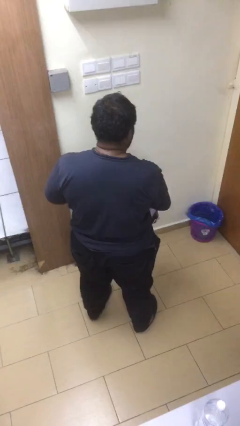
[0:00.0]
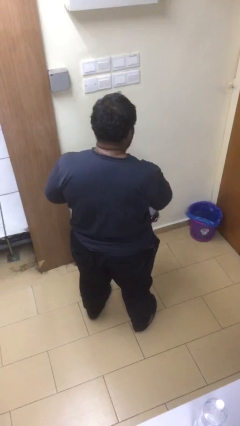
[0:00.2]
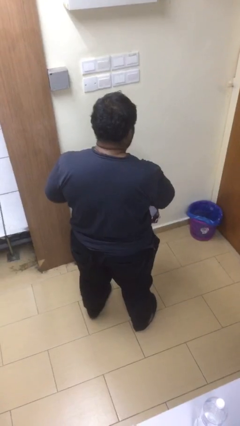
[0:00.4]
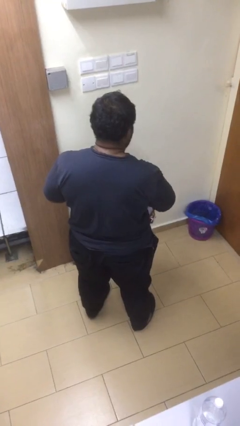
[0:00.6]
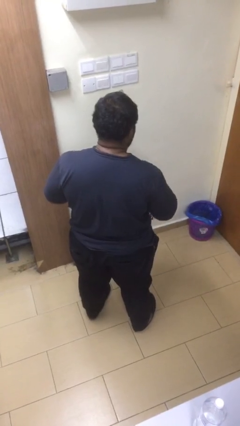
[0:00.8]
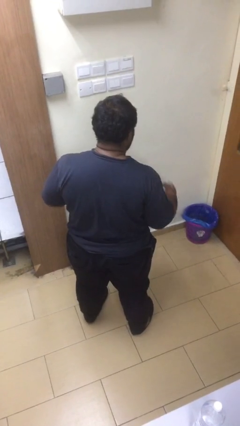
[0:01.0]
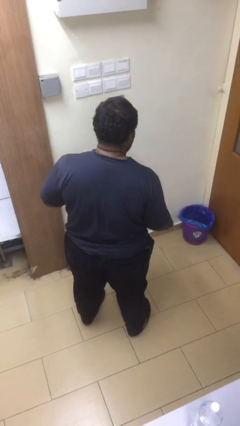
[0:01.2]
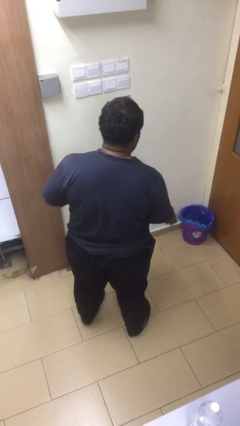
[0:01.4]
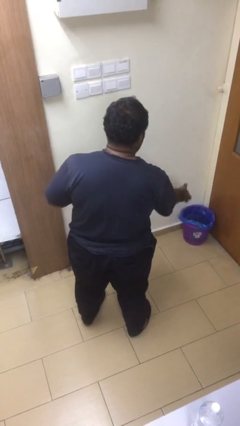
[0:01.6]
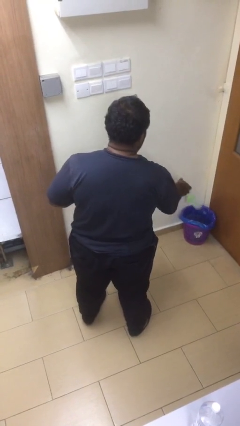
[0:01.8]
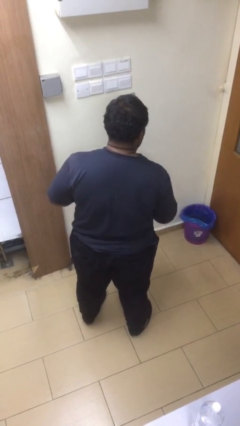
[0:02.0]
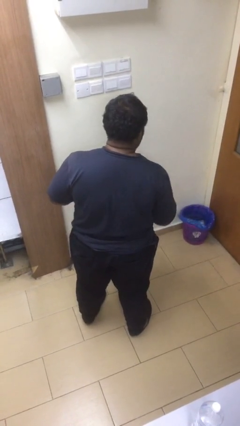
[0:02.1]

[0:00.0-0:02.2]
person discards trash

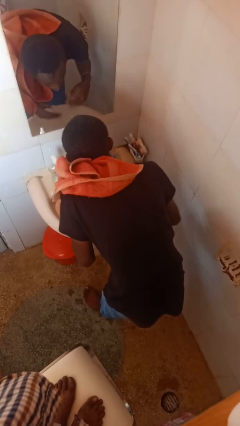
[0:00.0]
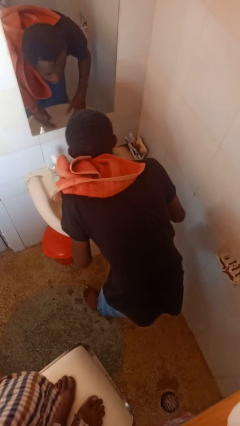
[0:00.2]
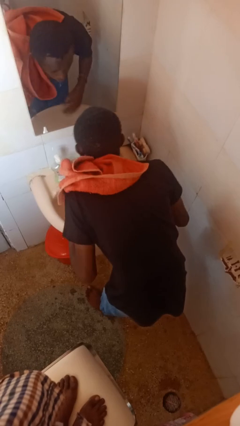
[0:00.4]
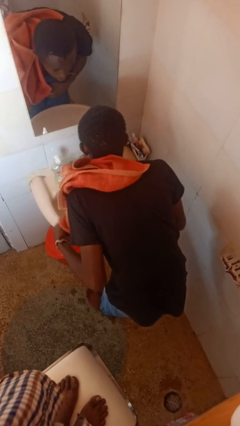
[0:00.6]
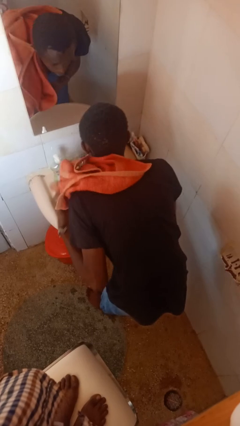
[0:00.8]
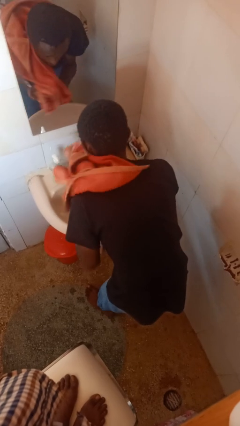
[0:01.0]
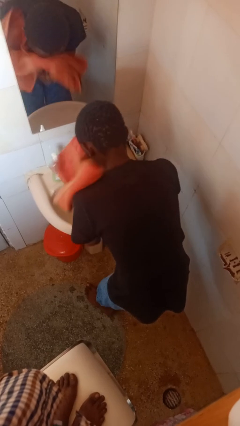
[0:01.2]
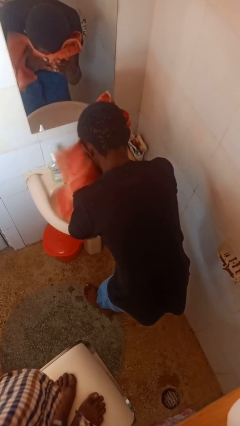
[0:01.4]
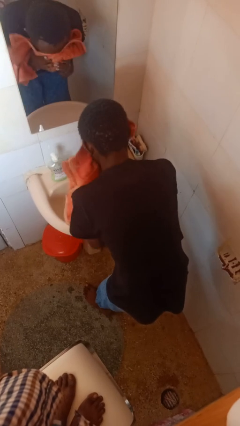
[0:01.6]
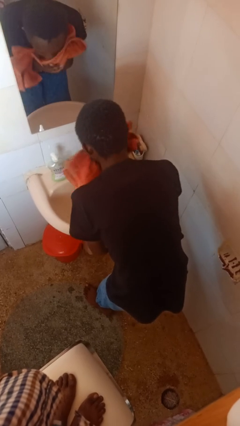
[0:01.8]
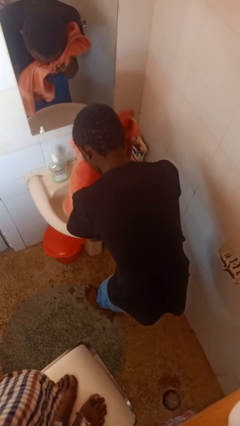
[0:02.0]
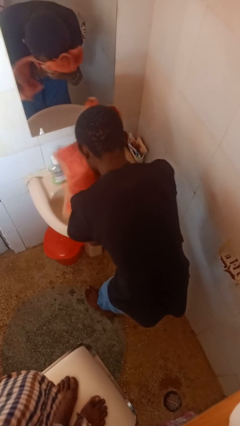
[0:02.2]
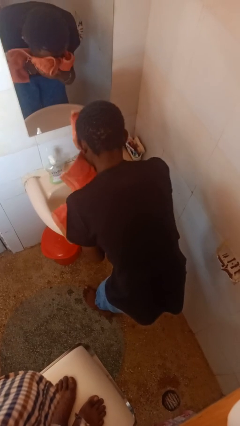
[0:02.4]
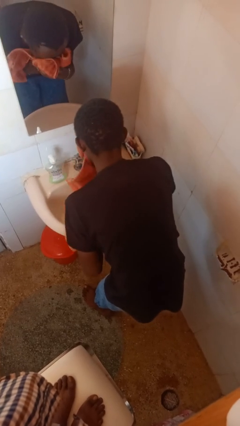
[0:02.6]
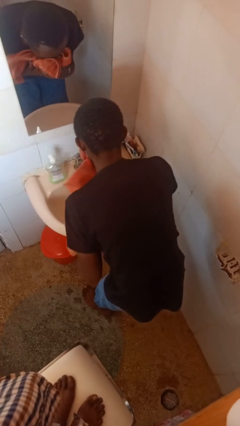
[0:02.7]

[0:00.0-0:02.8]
person dries face with towel

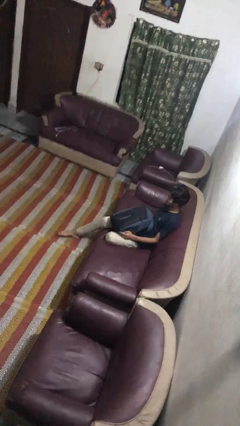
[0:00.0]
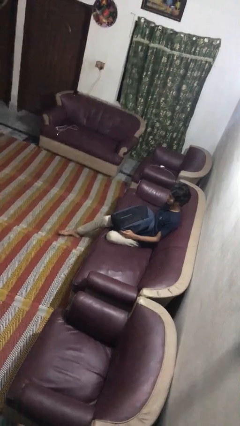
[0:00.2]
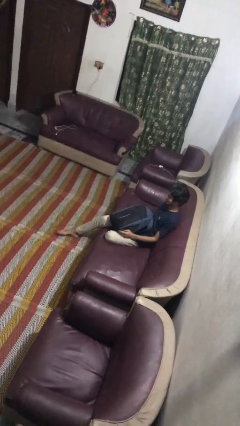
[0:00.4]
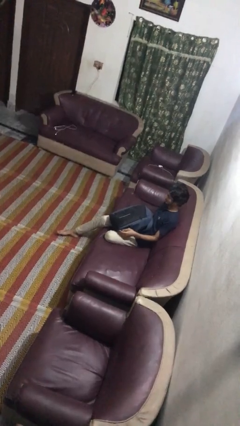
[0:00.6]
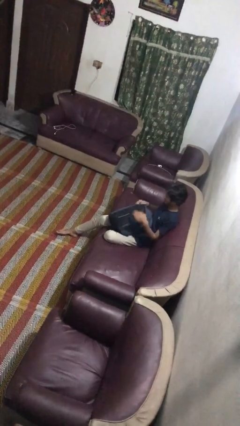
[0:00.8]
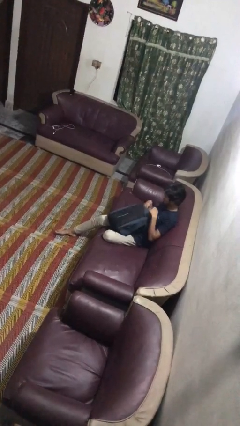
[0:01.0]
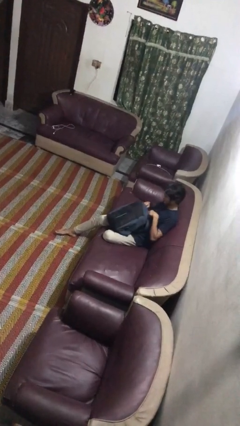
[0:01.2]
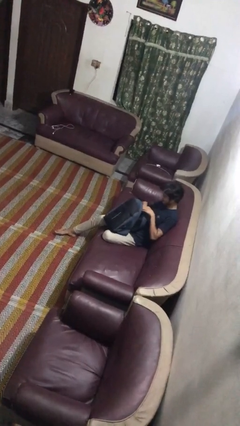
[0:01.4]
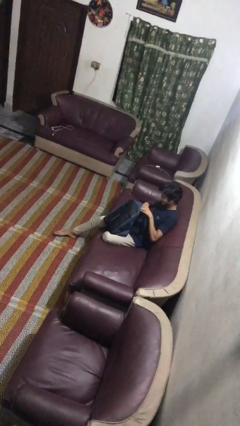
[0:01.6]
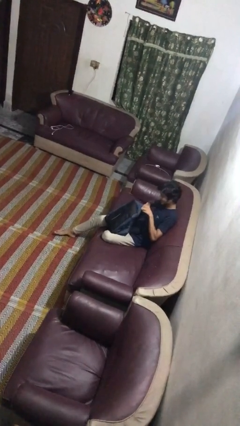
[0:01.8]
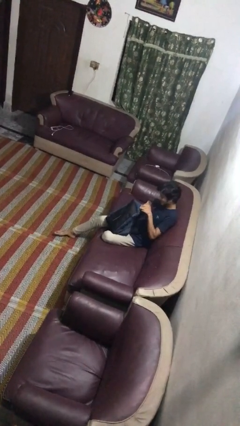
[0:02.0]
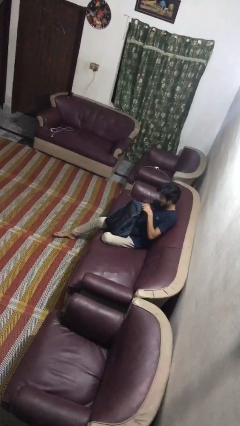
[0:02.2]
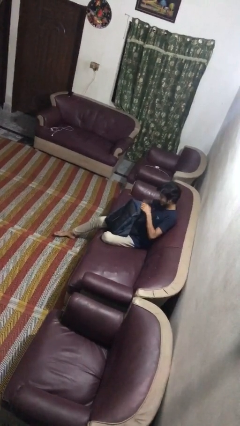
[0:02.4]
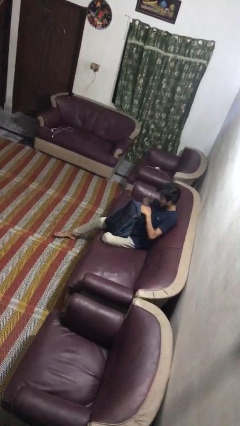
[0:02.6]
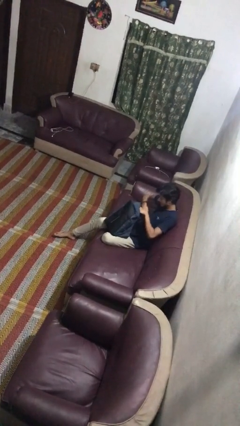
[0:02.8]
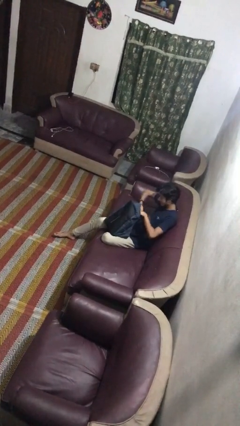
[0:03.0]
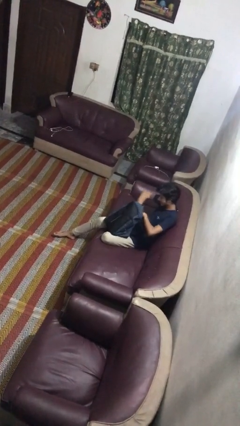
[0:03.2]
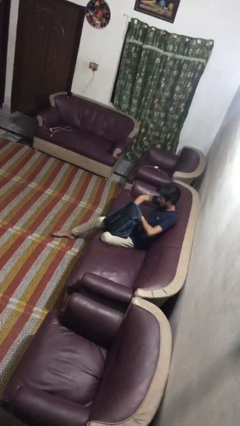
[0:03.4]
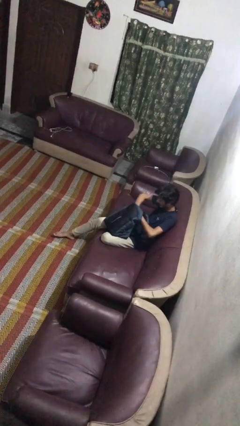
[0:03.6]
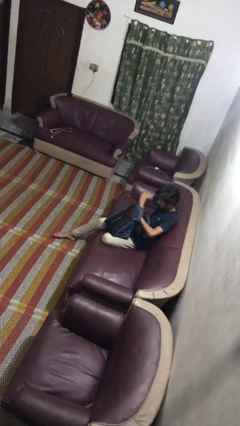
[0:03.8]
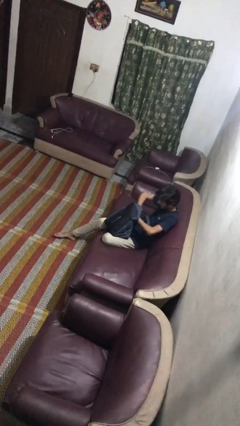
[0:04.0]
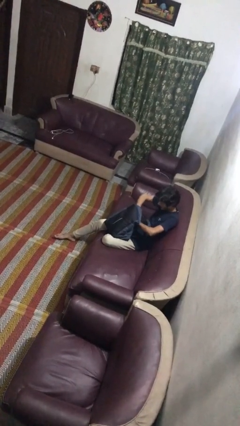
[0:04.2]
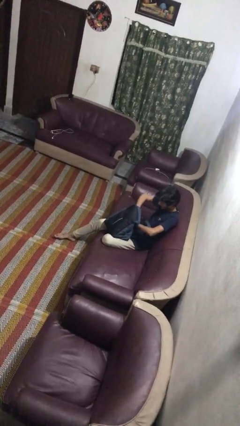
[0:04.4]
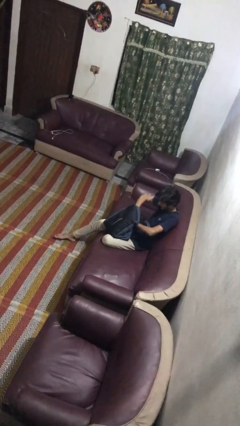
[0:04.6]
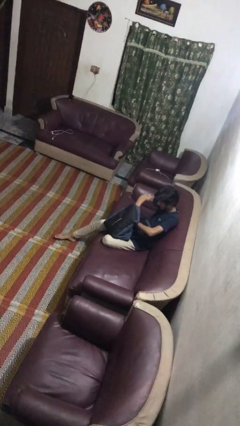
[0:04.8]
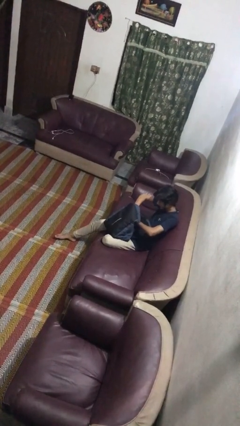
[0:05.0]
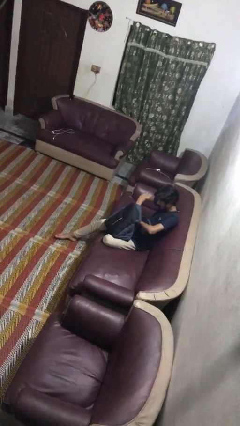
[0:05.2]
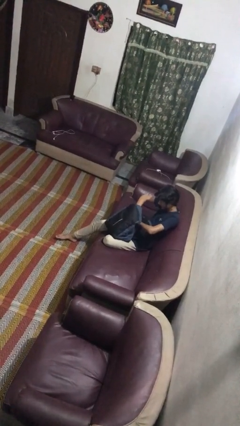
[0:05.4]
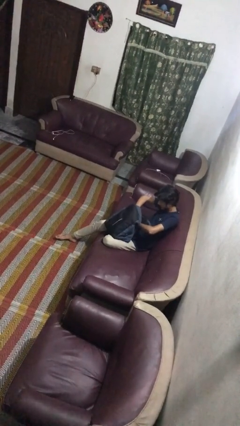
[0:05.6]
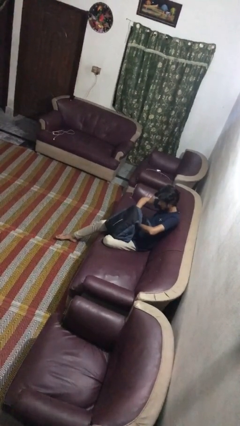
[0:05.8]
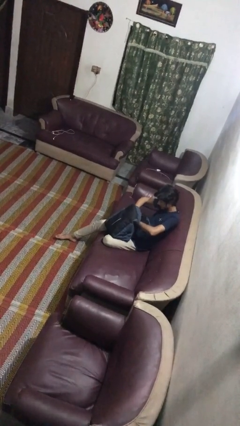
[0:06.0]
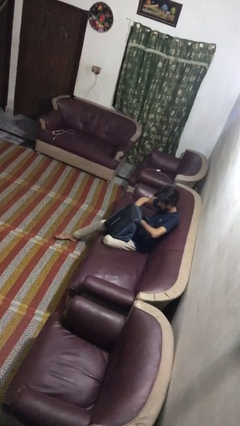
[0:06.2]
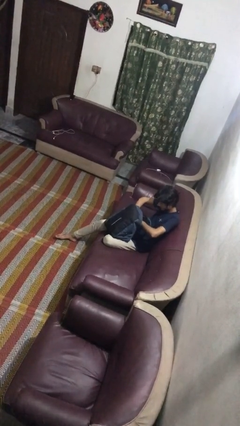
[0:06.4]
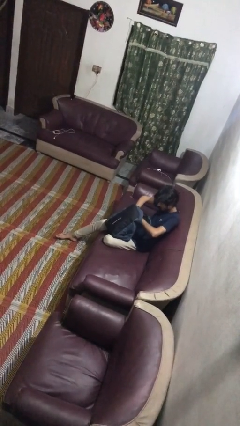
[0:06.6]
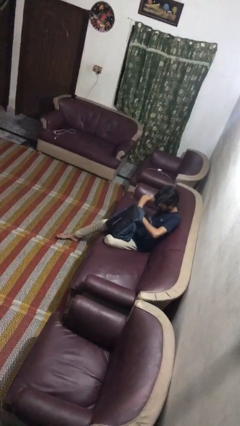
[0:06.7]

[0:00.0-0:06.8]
person searches in backpack

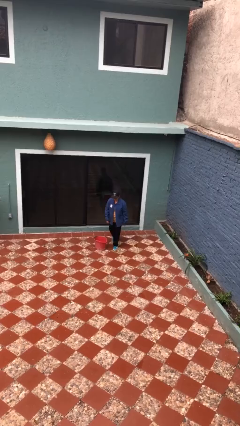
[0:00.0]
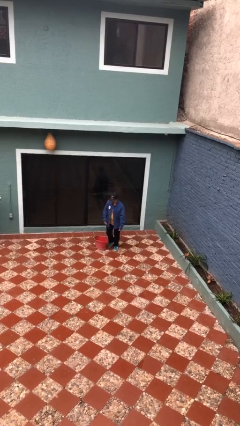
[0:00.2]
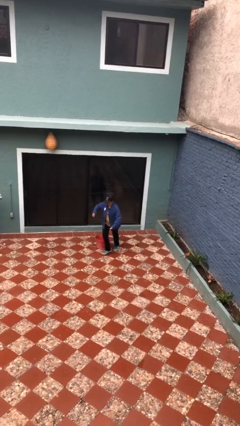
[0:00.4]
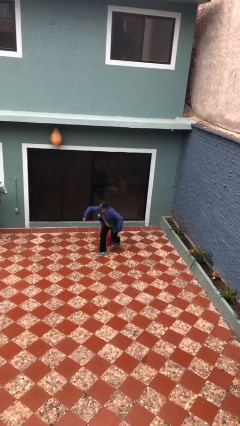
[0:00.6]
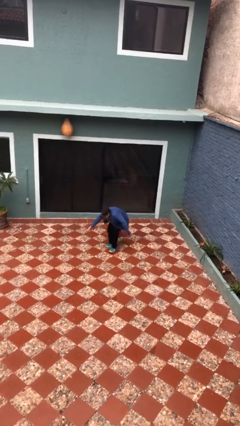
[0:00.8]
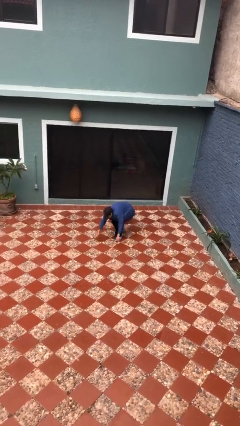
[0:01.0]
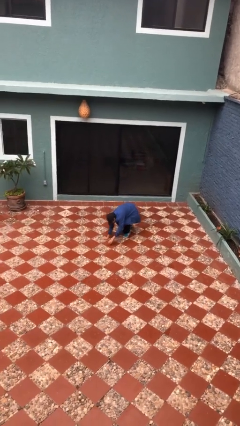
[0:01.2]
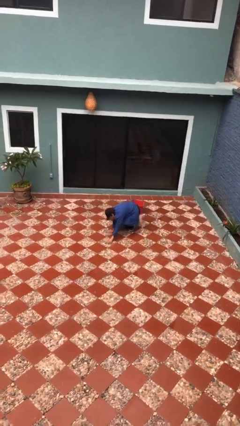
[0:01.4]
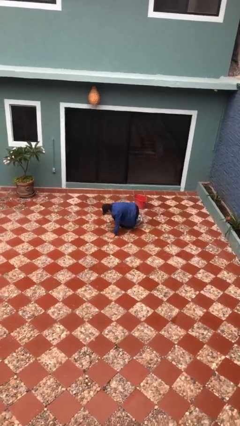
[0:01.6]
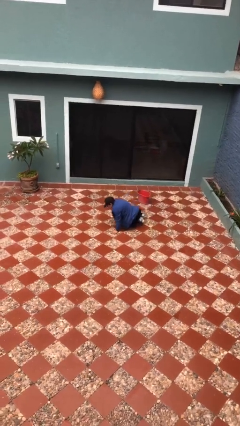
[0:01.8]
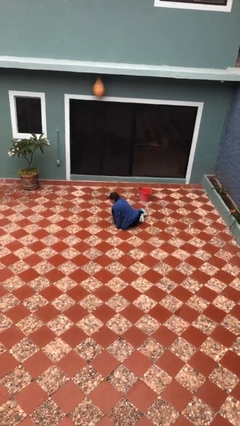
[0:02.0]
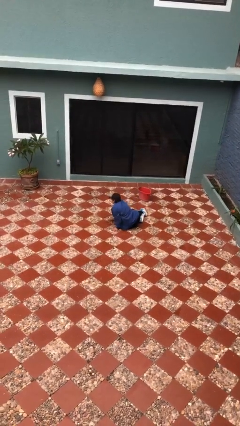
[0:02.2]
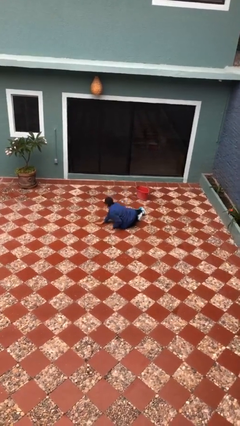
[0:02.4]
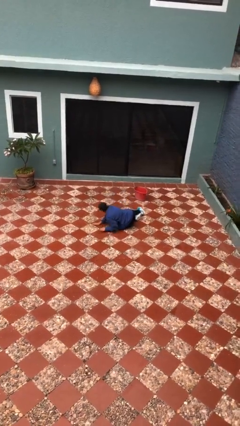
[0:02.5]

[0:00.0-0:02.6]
person trips on object on floor

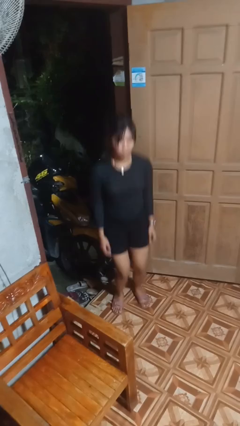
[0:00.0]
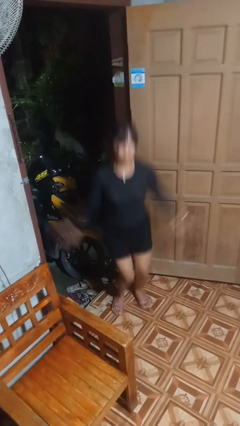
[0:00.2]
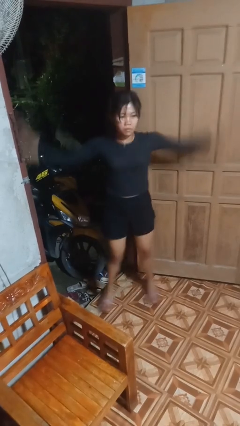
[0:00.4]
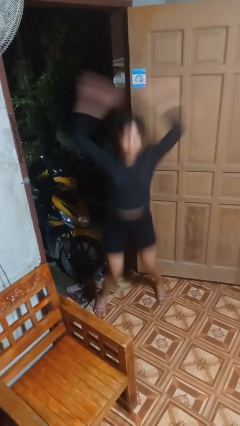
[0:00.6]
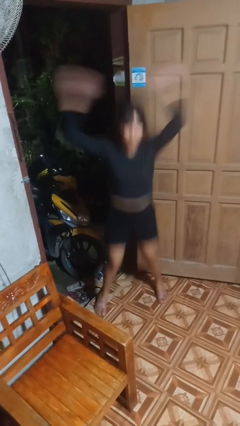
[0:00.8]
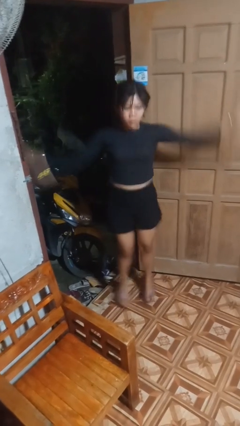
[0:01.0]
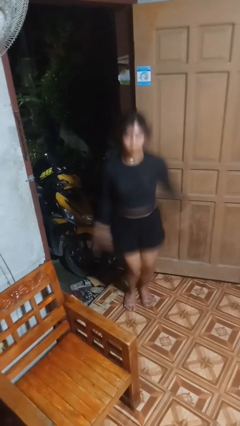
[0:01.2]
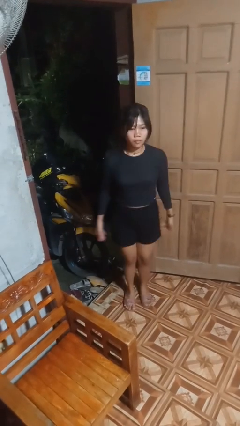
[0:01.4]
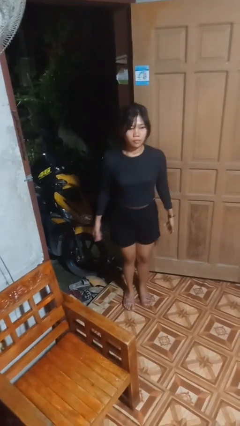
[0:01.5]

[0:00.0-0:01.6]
person exercises with jumping jacks

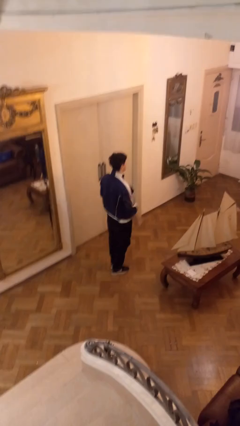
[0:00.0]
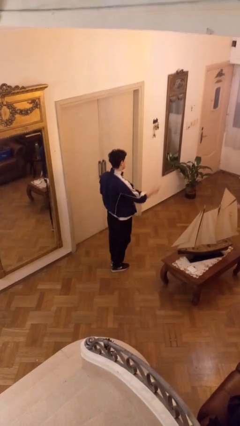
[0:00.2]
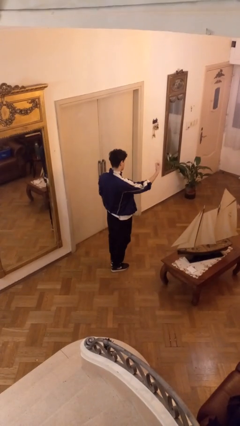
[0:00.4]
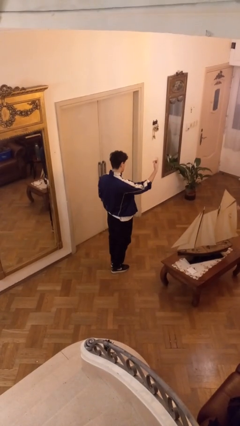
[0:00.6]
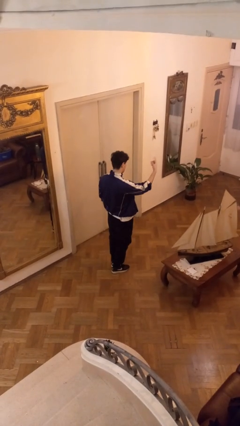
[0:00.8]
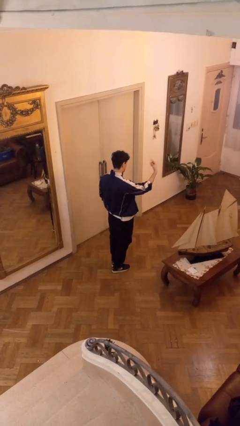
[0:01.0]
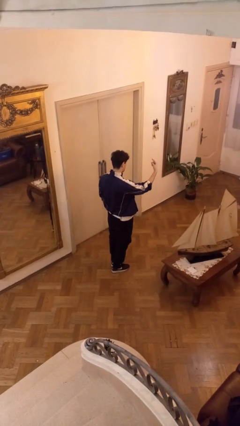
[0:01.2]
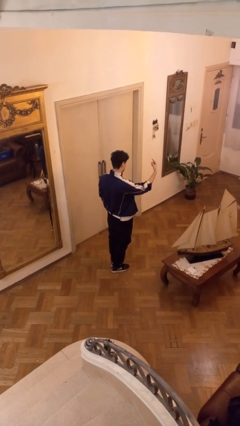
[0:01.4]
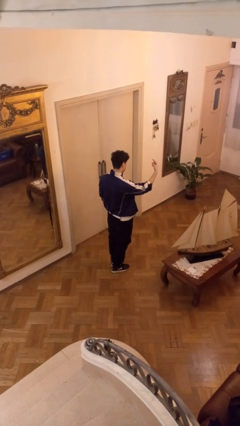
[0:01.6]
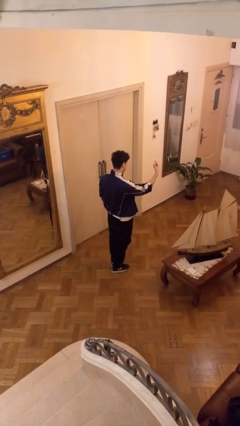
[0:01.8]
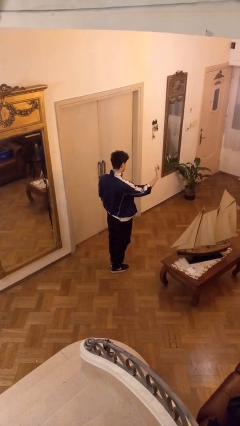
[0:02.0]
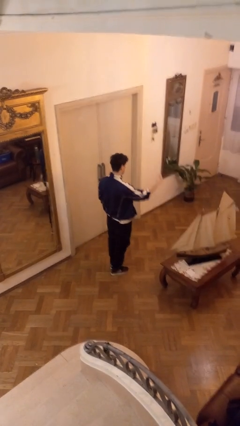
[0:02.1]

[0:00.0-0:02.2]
person gestures come here
